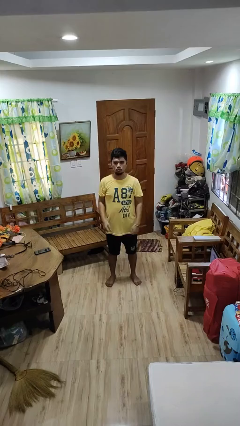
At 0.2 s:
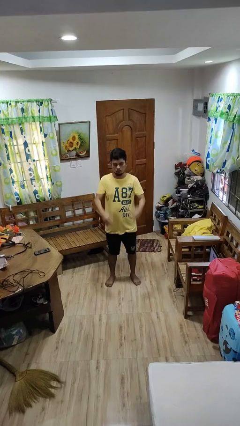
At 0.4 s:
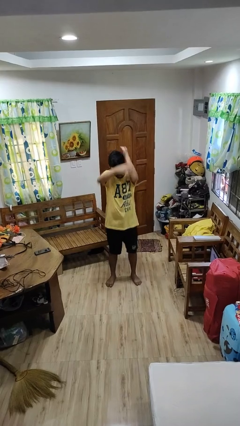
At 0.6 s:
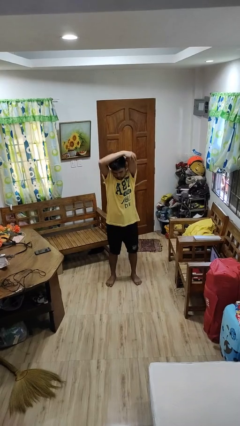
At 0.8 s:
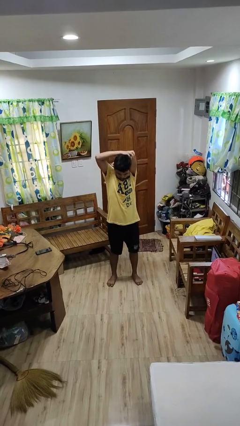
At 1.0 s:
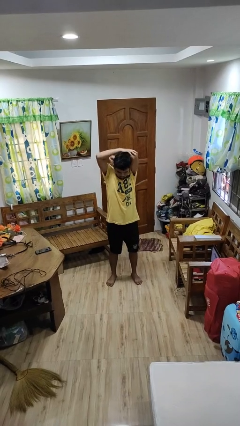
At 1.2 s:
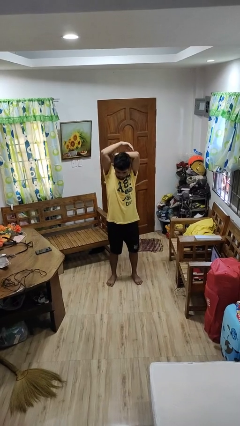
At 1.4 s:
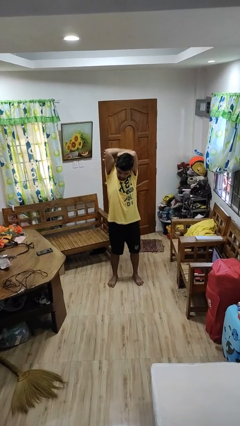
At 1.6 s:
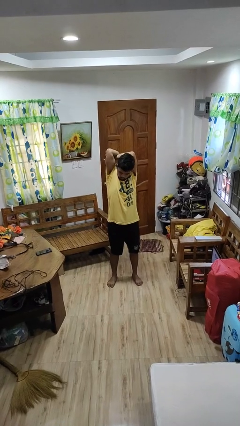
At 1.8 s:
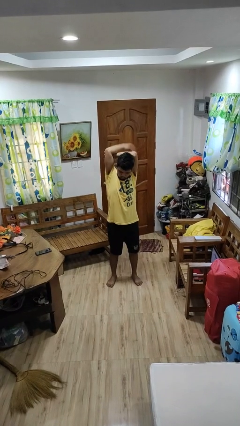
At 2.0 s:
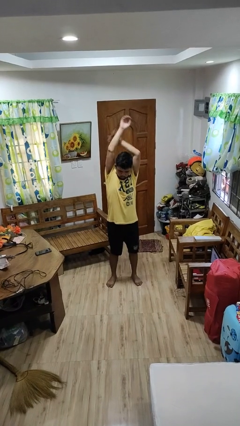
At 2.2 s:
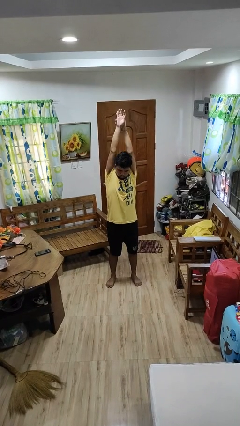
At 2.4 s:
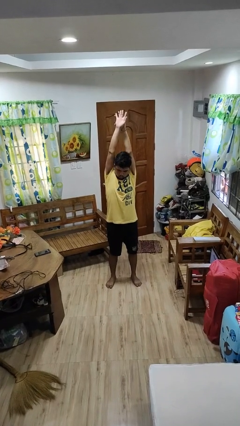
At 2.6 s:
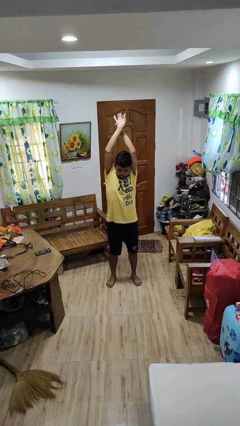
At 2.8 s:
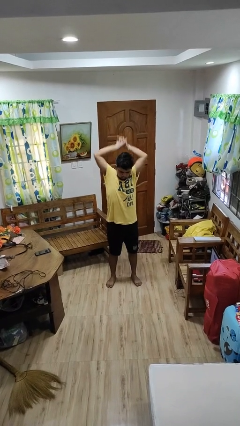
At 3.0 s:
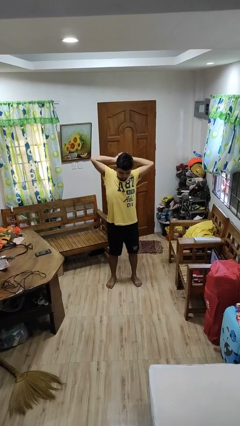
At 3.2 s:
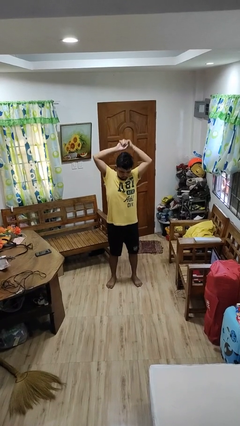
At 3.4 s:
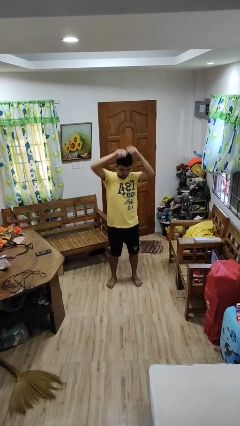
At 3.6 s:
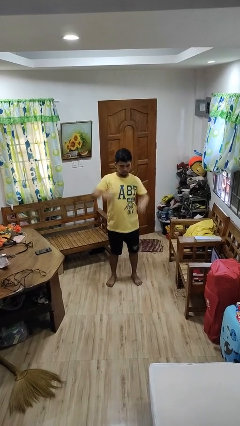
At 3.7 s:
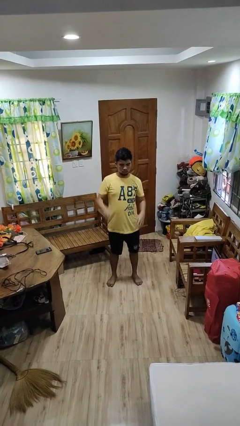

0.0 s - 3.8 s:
person stretches arms over head

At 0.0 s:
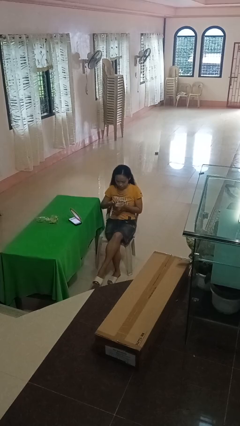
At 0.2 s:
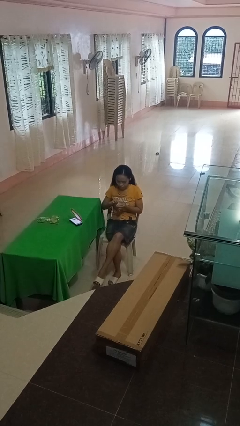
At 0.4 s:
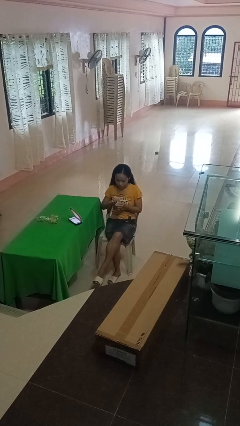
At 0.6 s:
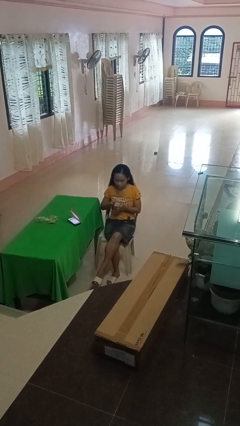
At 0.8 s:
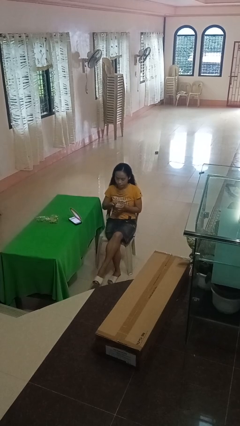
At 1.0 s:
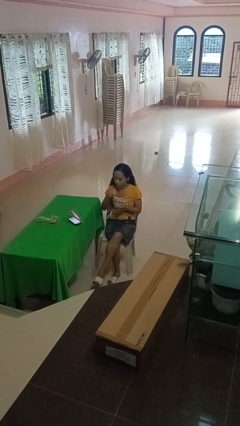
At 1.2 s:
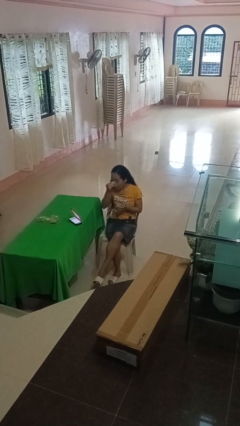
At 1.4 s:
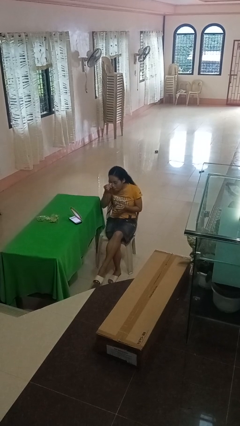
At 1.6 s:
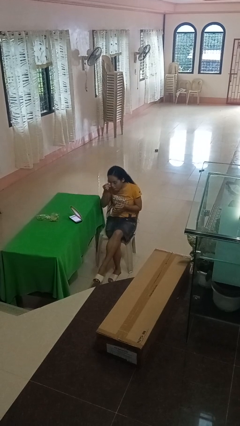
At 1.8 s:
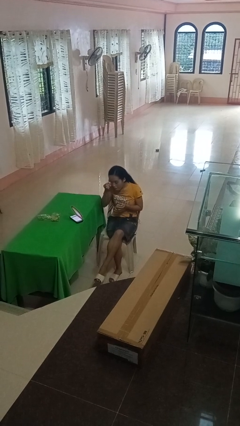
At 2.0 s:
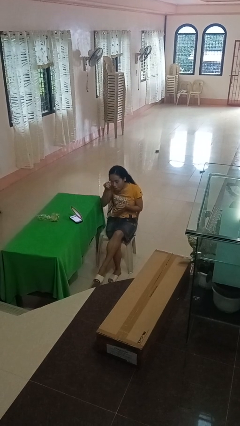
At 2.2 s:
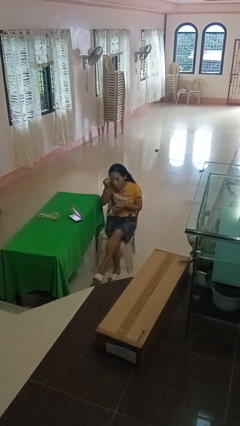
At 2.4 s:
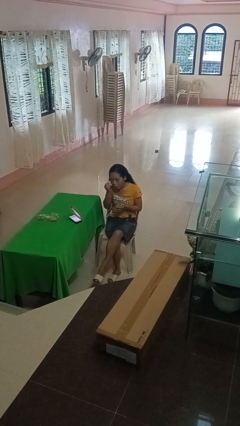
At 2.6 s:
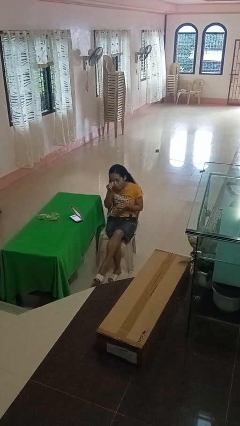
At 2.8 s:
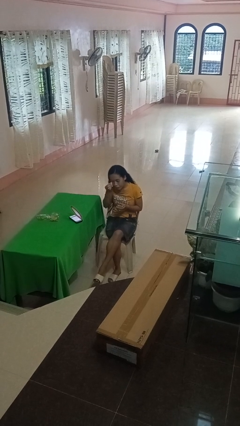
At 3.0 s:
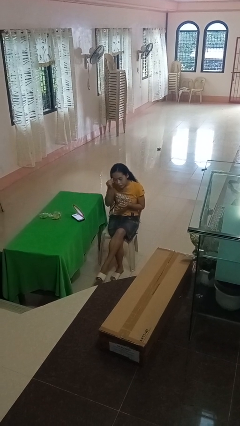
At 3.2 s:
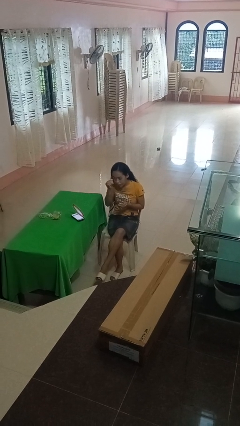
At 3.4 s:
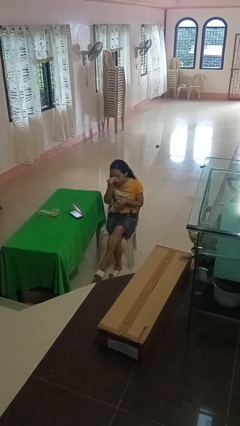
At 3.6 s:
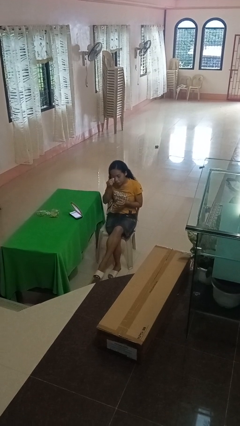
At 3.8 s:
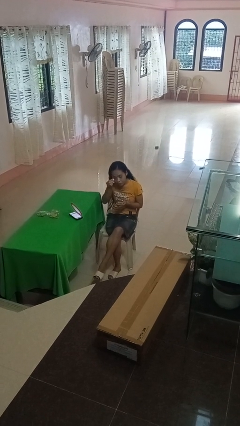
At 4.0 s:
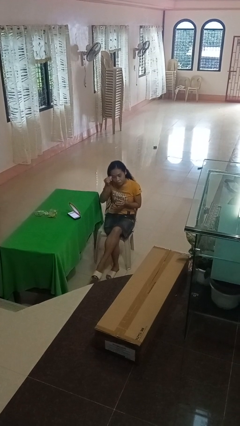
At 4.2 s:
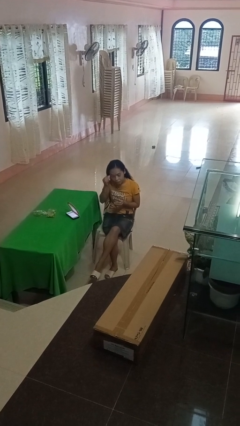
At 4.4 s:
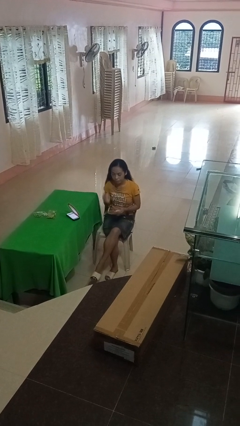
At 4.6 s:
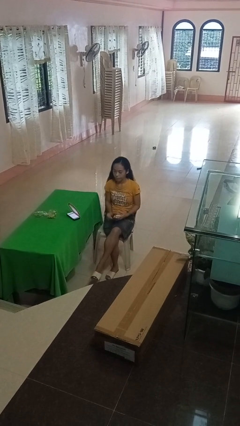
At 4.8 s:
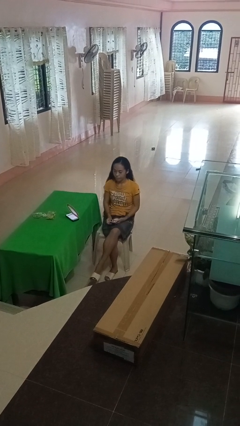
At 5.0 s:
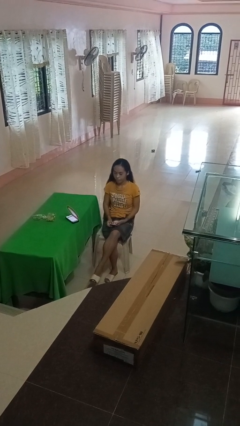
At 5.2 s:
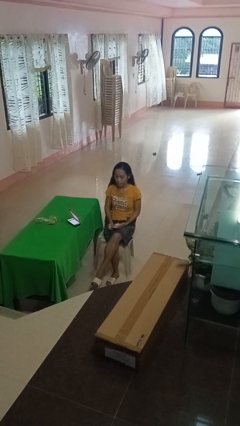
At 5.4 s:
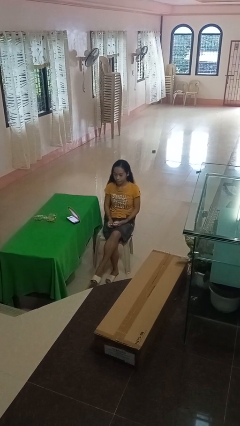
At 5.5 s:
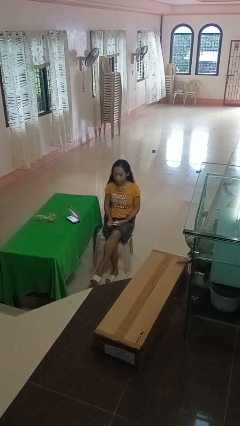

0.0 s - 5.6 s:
person applies foundation makeup

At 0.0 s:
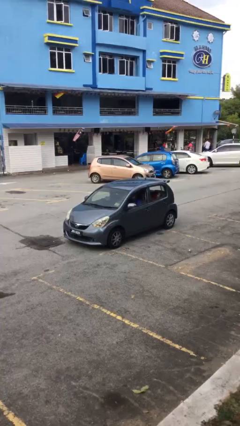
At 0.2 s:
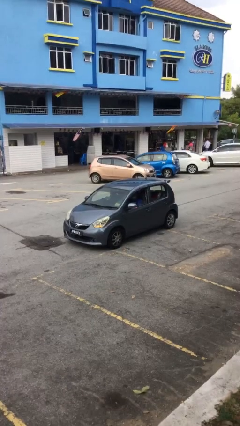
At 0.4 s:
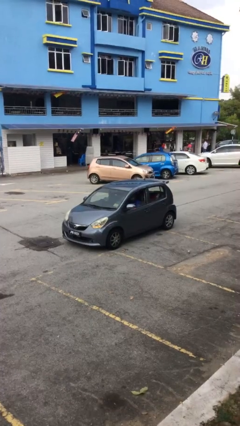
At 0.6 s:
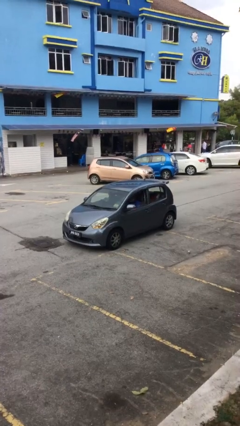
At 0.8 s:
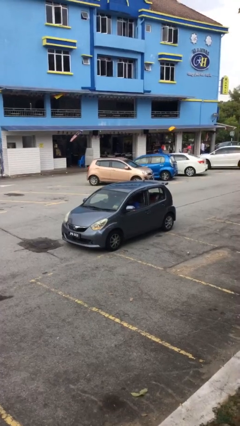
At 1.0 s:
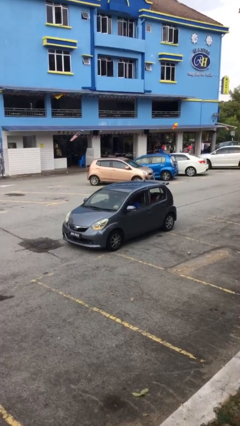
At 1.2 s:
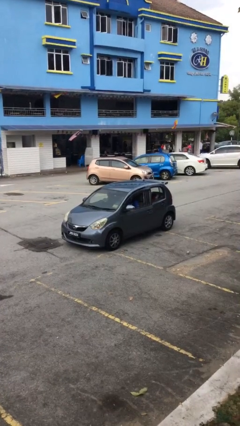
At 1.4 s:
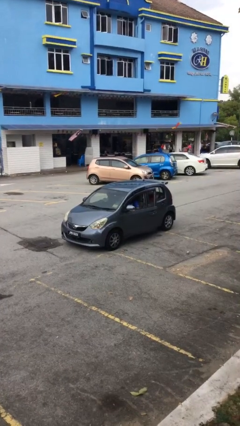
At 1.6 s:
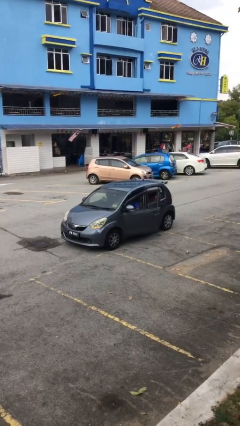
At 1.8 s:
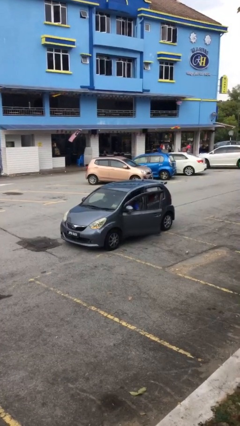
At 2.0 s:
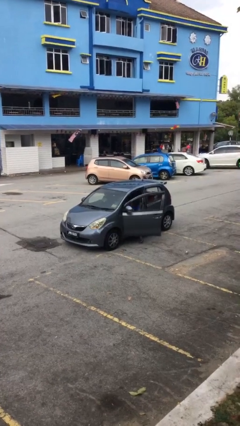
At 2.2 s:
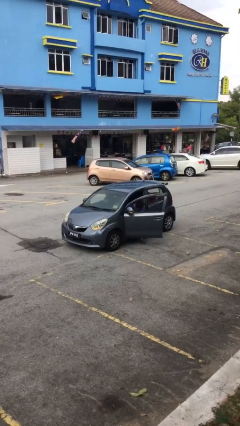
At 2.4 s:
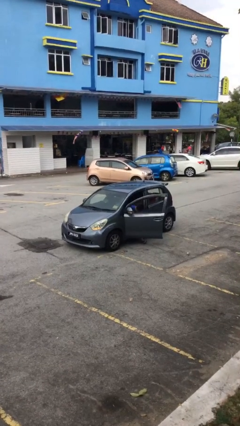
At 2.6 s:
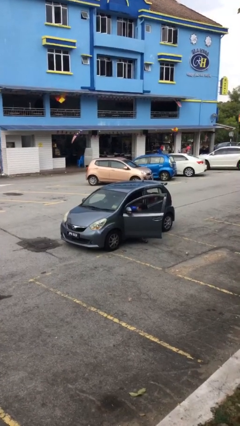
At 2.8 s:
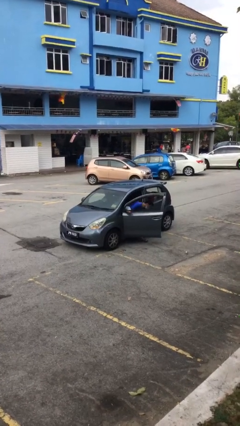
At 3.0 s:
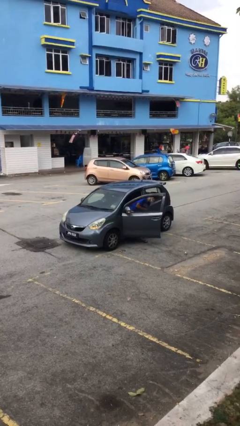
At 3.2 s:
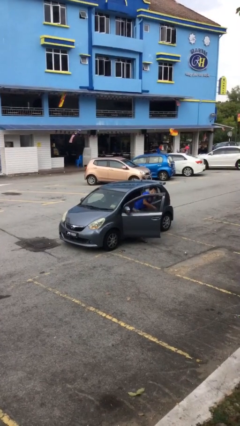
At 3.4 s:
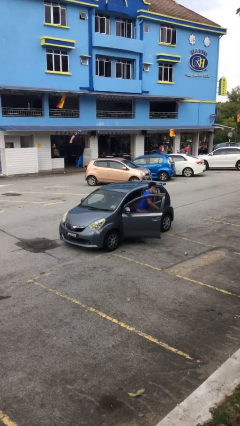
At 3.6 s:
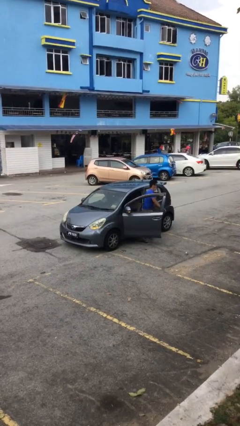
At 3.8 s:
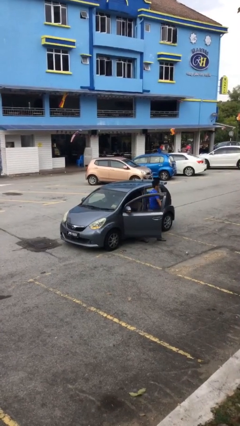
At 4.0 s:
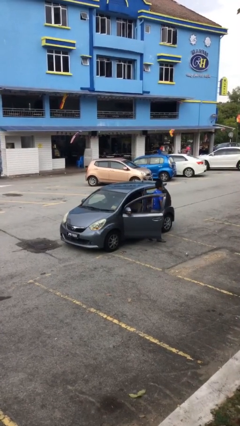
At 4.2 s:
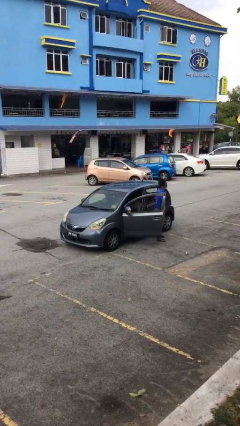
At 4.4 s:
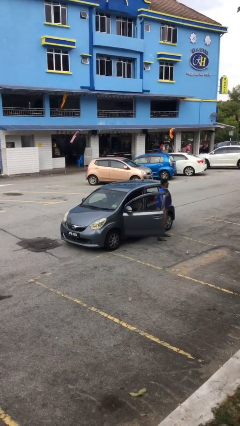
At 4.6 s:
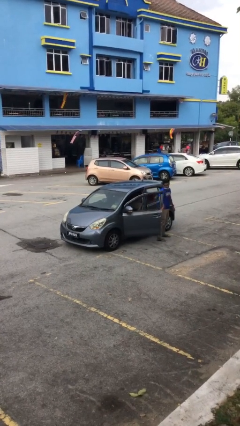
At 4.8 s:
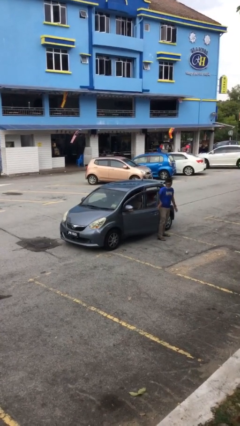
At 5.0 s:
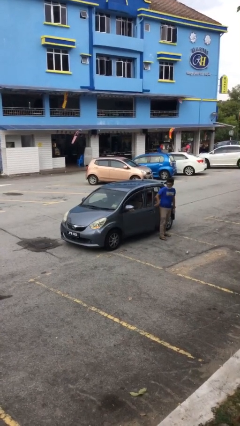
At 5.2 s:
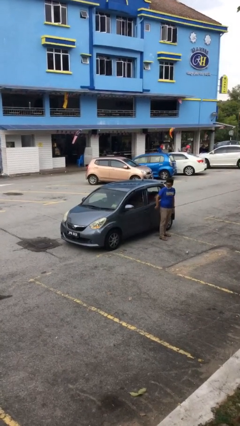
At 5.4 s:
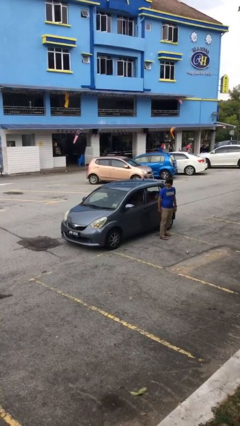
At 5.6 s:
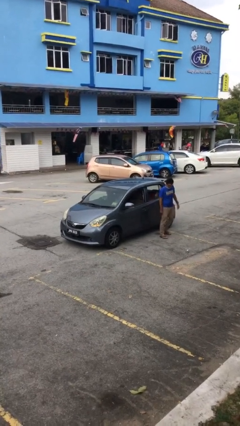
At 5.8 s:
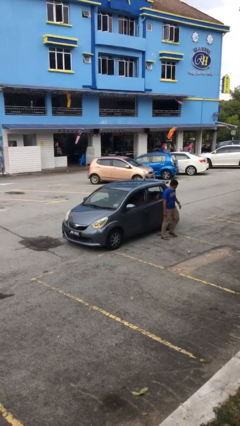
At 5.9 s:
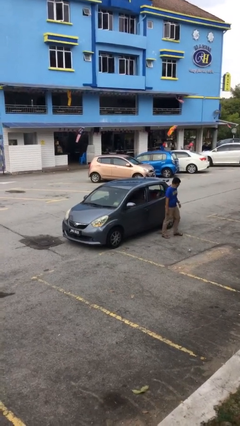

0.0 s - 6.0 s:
car drops off person

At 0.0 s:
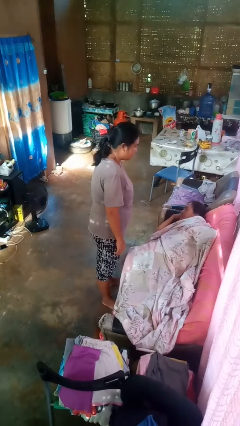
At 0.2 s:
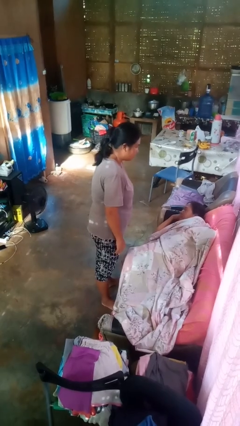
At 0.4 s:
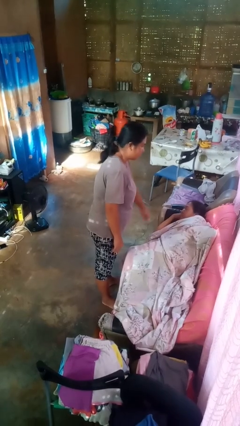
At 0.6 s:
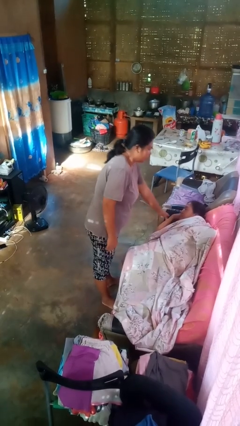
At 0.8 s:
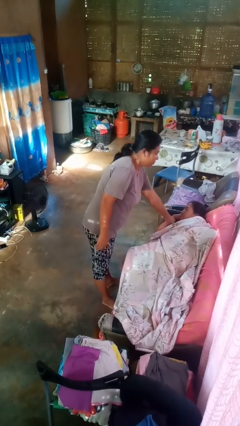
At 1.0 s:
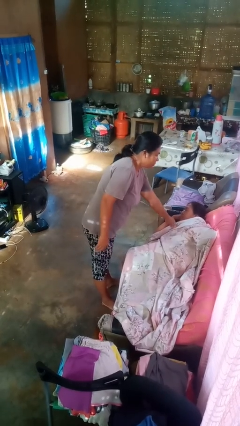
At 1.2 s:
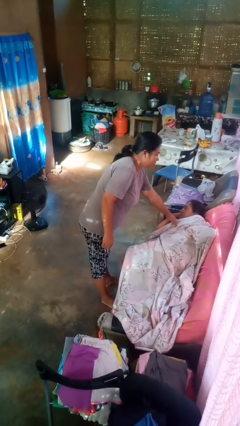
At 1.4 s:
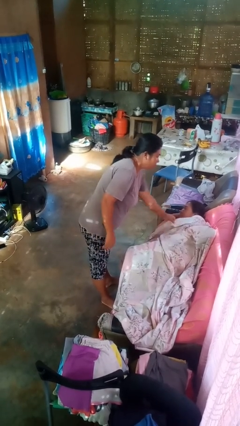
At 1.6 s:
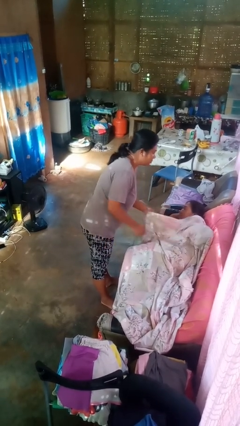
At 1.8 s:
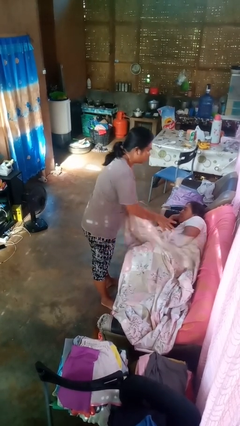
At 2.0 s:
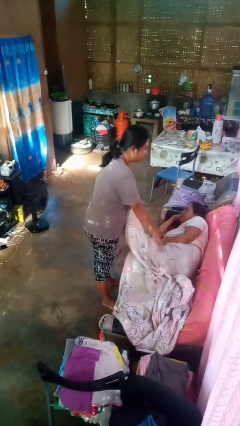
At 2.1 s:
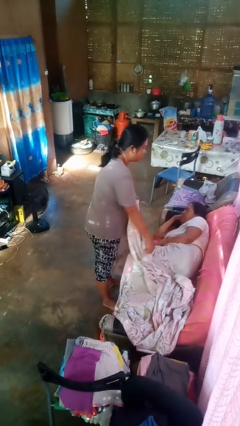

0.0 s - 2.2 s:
person uncovers friend with blanket
